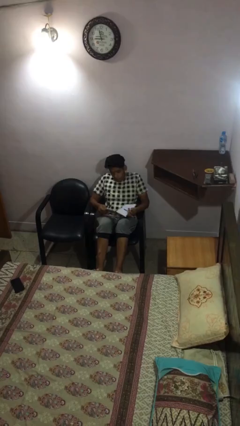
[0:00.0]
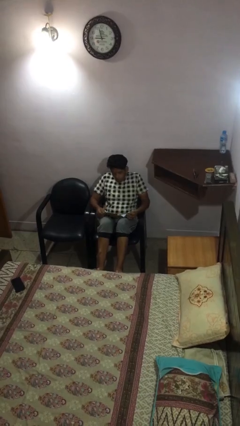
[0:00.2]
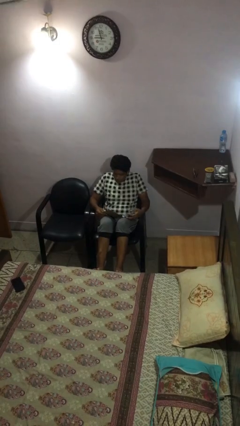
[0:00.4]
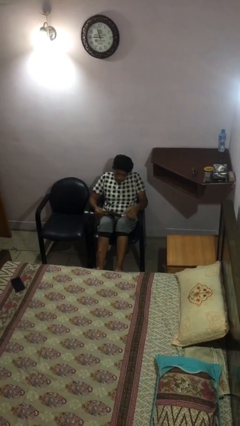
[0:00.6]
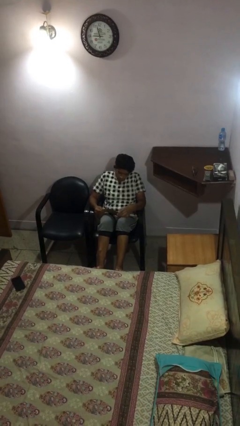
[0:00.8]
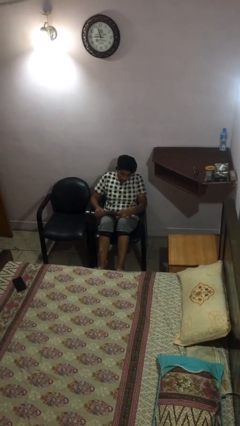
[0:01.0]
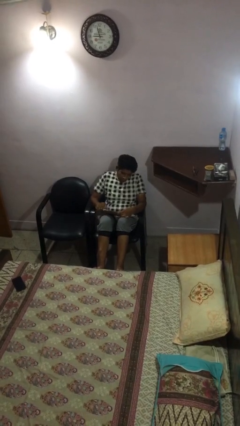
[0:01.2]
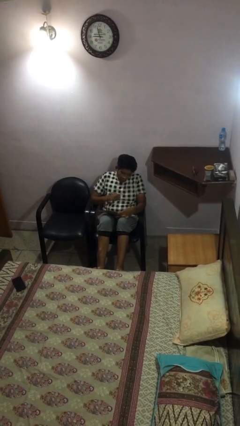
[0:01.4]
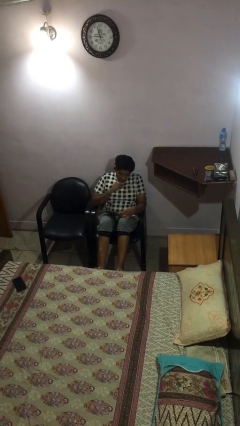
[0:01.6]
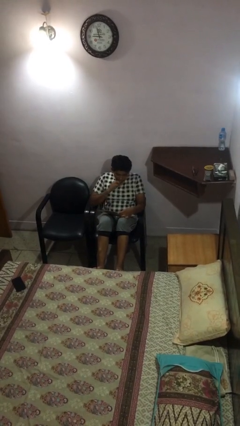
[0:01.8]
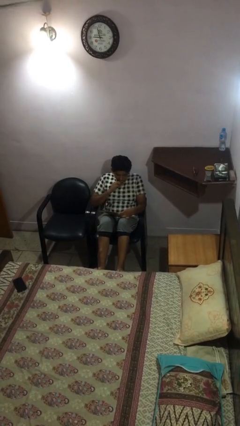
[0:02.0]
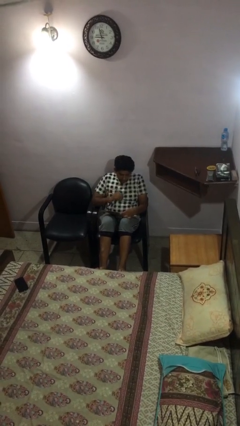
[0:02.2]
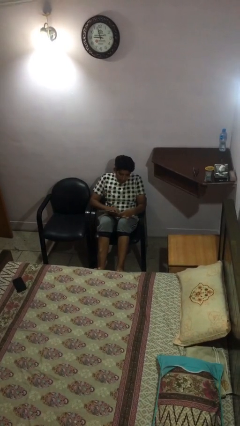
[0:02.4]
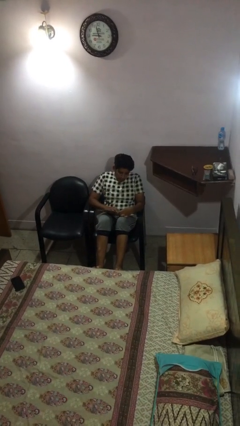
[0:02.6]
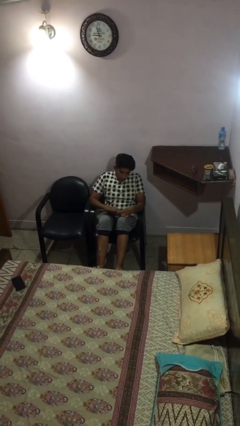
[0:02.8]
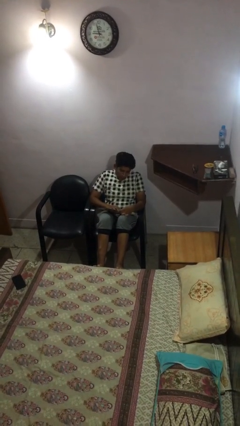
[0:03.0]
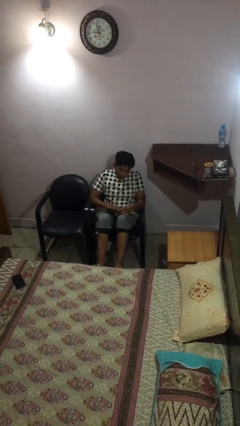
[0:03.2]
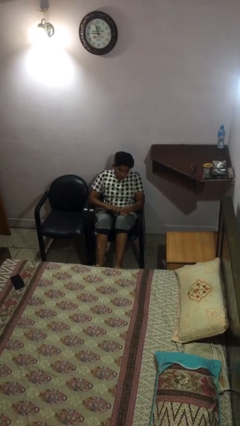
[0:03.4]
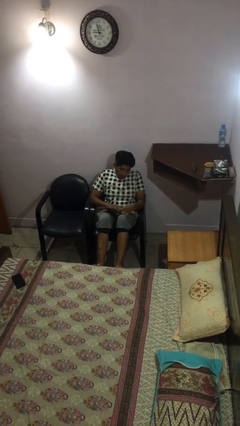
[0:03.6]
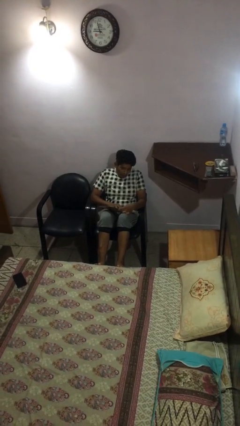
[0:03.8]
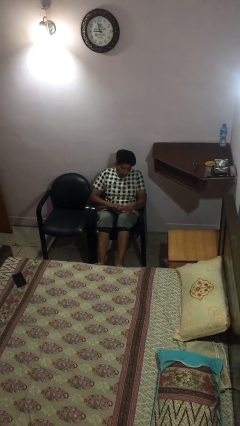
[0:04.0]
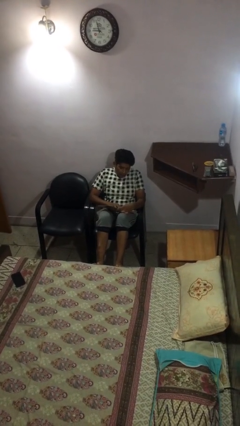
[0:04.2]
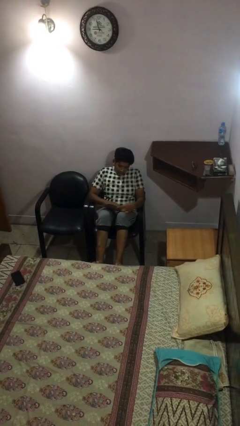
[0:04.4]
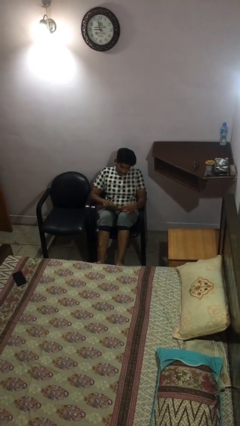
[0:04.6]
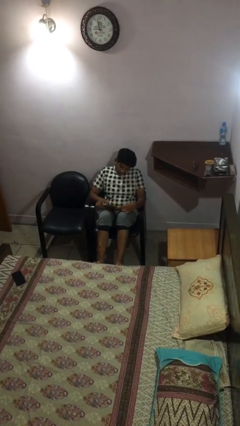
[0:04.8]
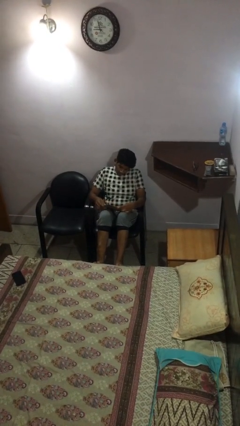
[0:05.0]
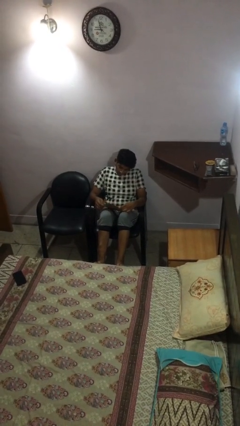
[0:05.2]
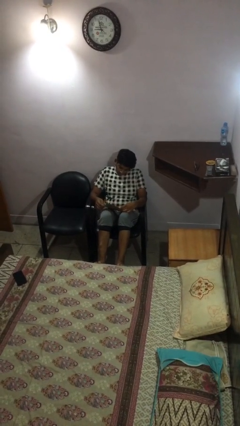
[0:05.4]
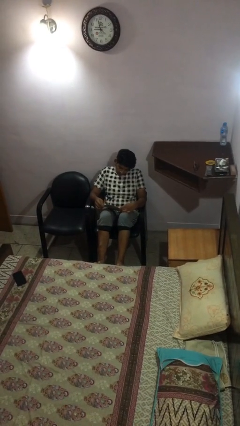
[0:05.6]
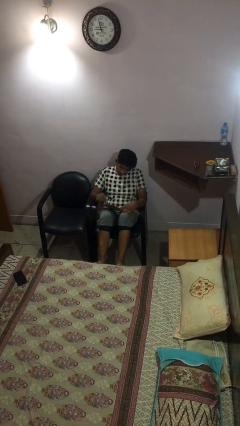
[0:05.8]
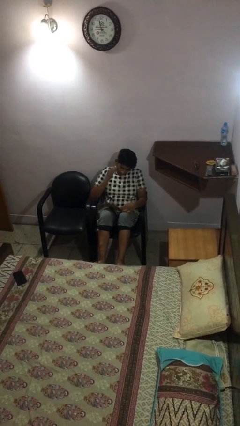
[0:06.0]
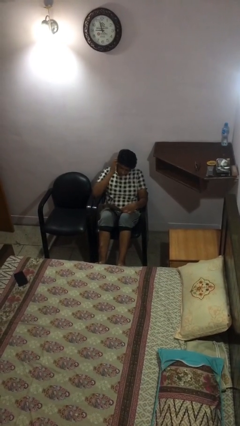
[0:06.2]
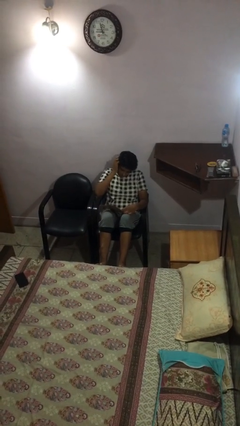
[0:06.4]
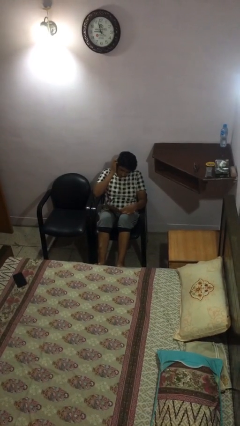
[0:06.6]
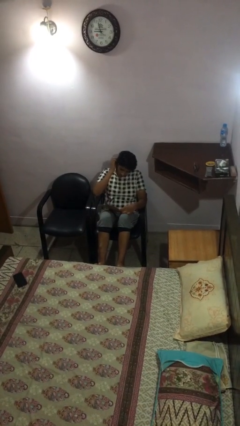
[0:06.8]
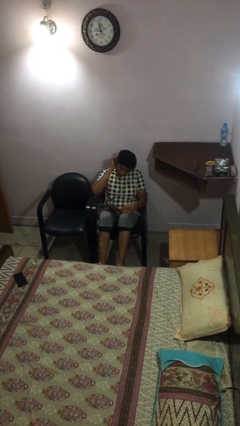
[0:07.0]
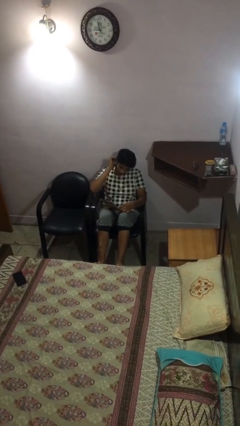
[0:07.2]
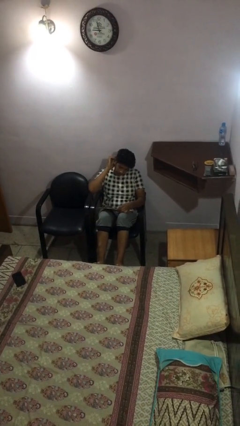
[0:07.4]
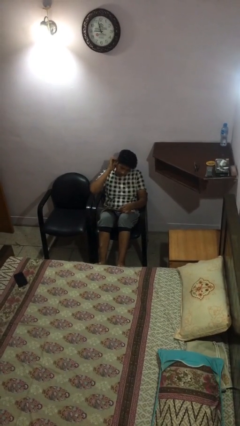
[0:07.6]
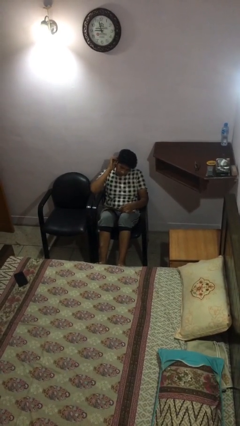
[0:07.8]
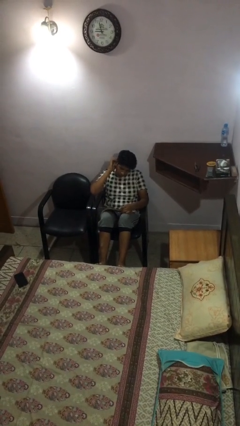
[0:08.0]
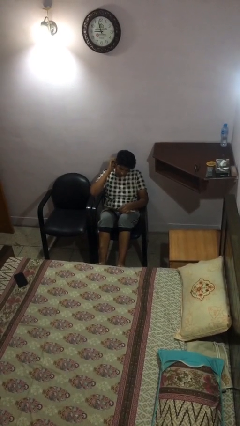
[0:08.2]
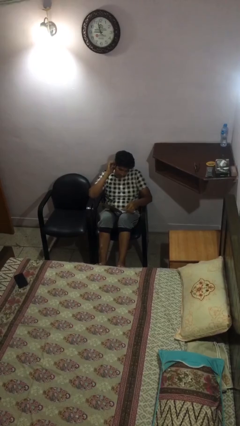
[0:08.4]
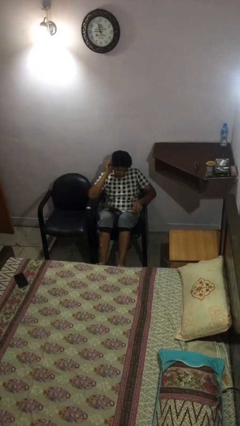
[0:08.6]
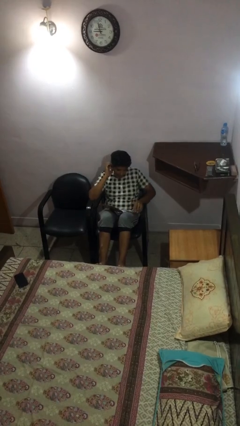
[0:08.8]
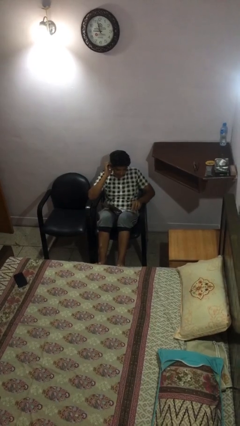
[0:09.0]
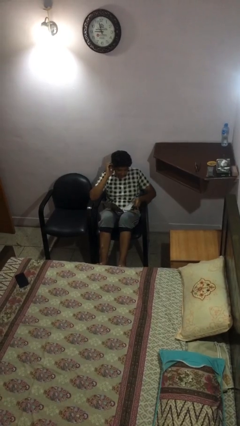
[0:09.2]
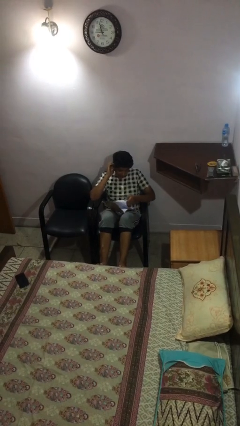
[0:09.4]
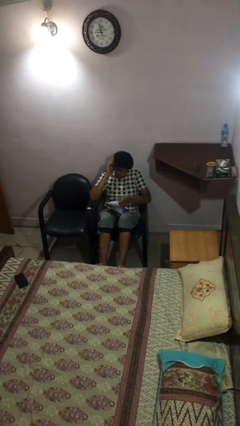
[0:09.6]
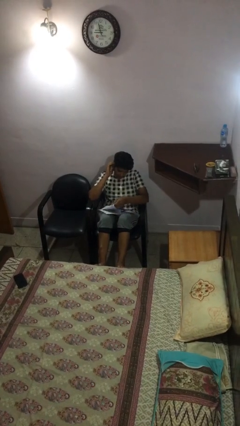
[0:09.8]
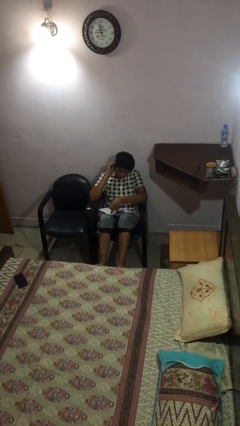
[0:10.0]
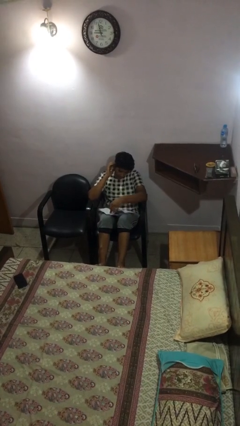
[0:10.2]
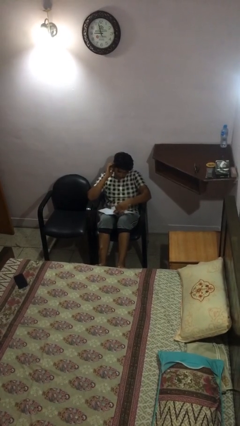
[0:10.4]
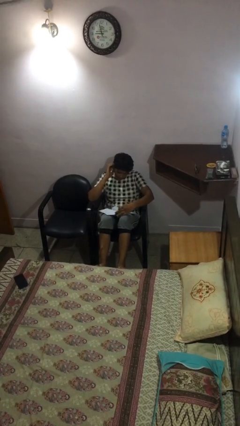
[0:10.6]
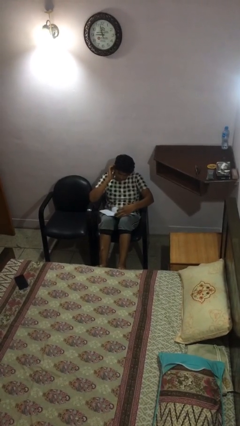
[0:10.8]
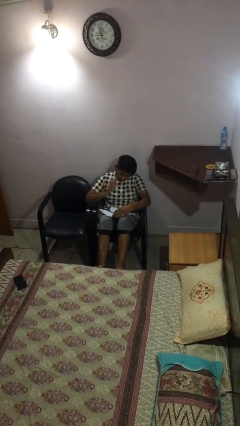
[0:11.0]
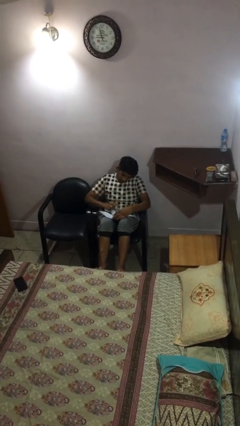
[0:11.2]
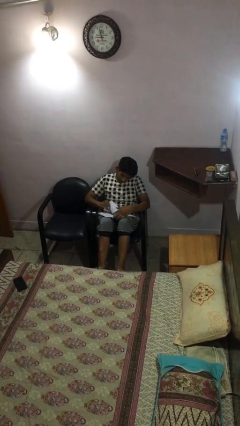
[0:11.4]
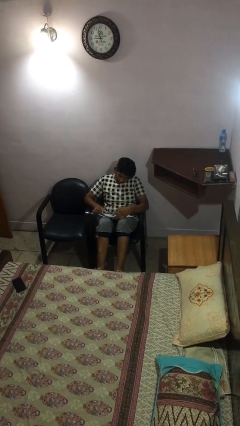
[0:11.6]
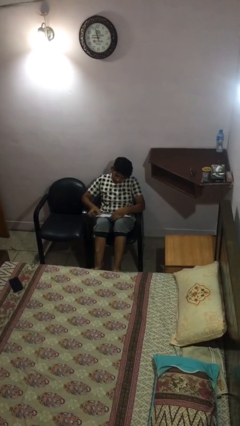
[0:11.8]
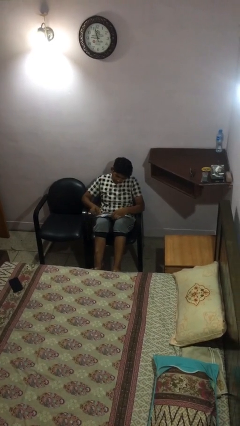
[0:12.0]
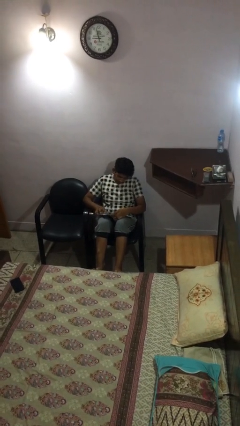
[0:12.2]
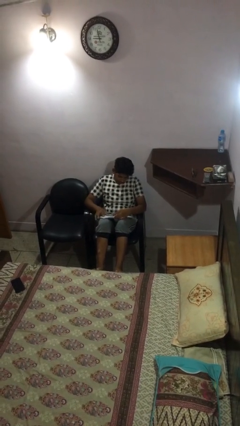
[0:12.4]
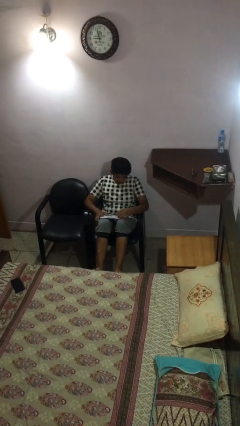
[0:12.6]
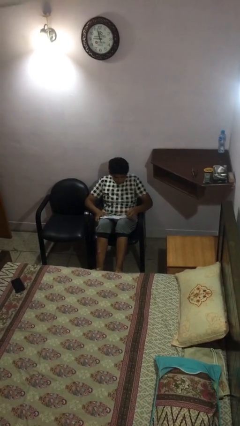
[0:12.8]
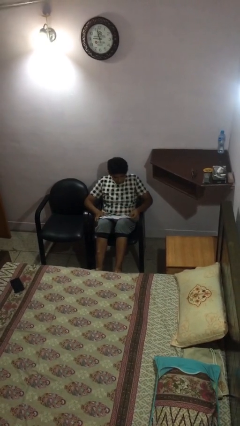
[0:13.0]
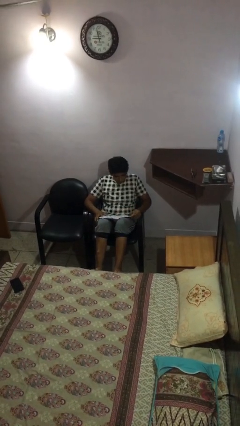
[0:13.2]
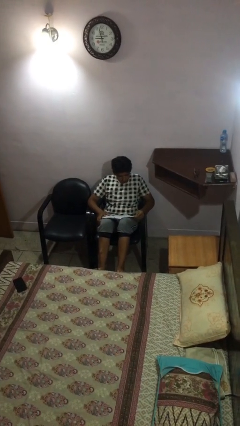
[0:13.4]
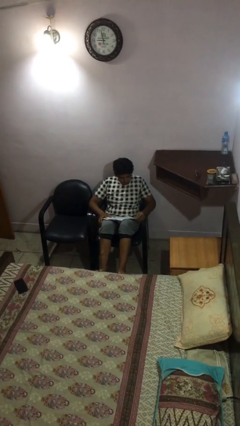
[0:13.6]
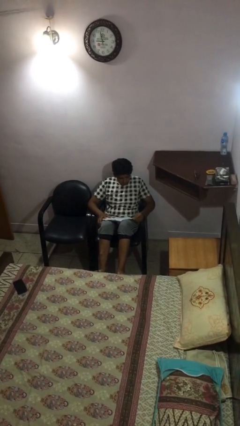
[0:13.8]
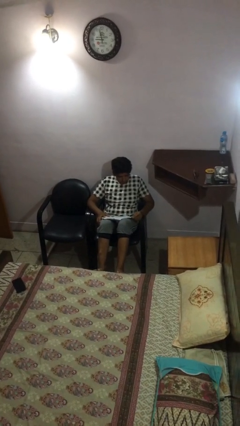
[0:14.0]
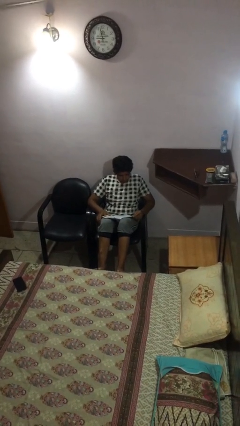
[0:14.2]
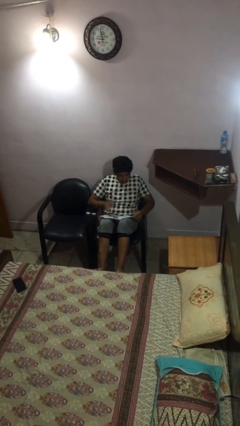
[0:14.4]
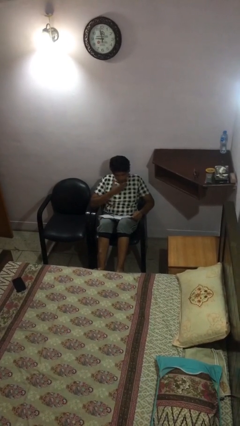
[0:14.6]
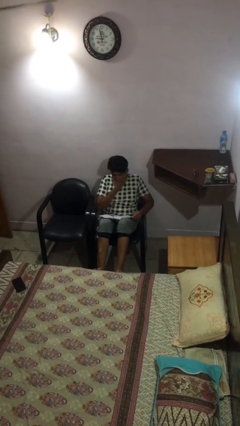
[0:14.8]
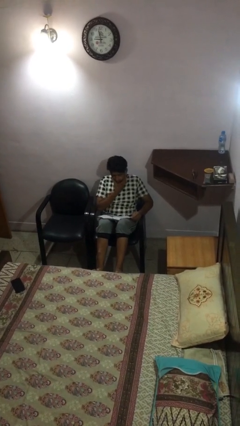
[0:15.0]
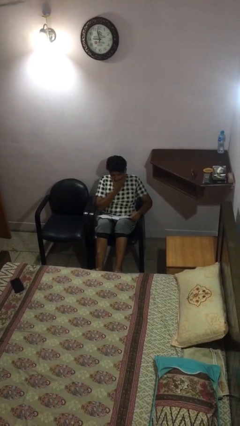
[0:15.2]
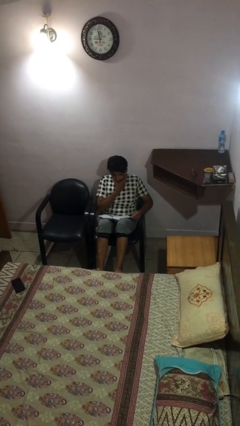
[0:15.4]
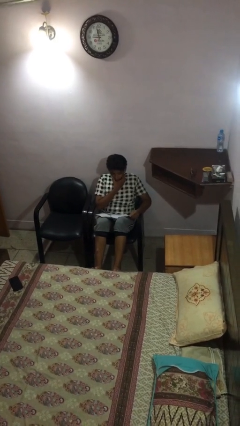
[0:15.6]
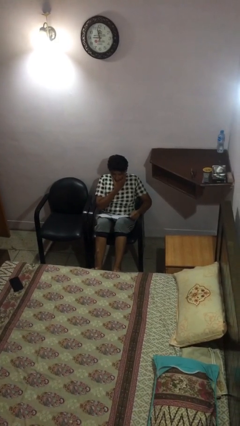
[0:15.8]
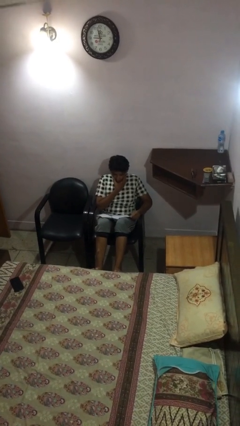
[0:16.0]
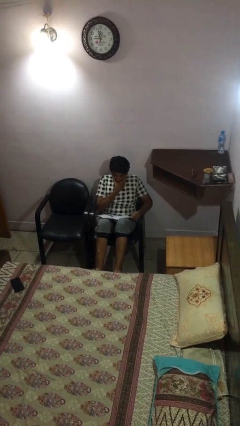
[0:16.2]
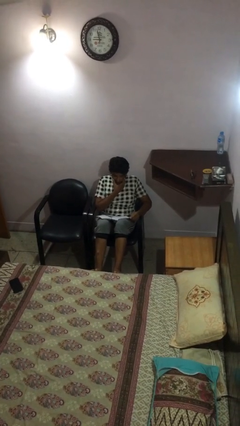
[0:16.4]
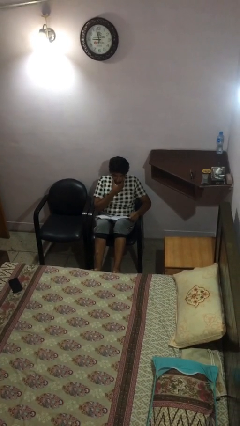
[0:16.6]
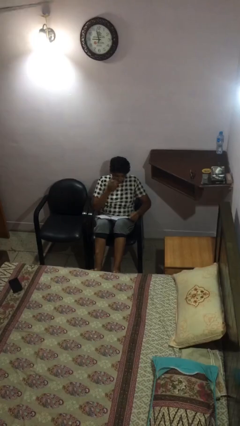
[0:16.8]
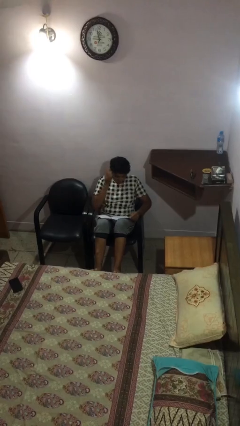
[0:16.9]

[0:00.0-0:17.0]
person reads document

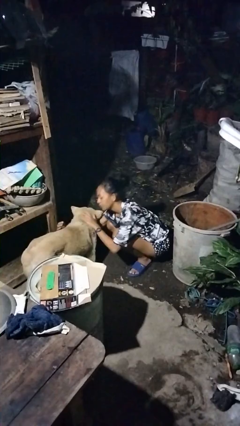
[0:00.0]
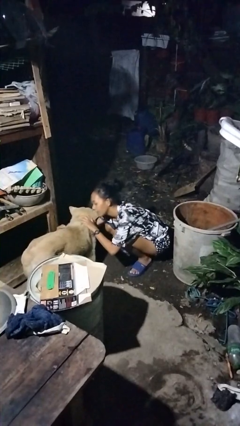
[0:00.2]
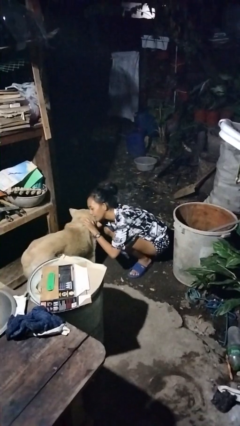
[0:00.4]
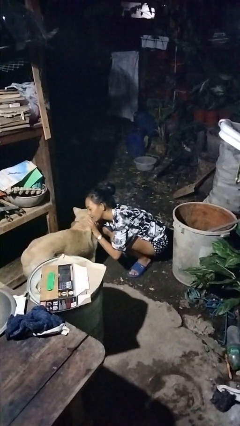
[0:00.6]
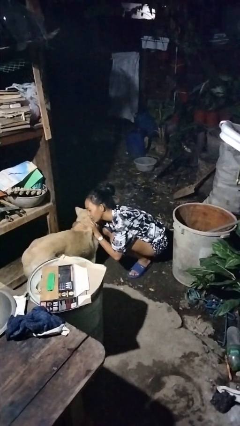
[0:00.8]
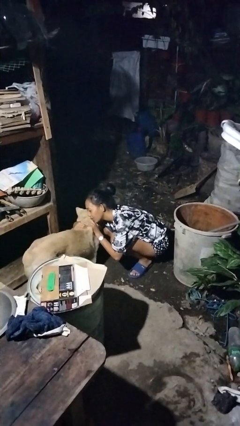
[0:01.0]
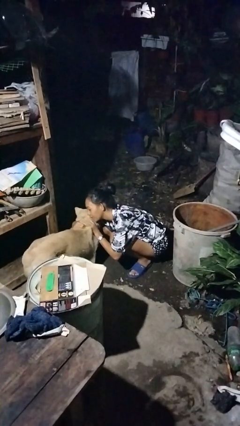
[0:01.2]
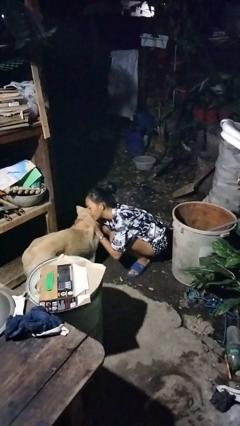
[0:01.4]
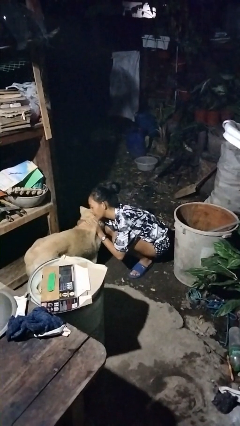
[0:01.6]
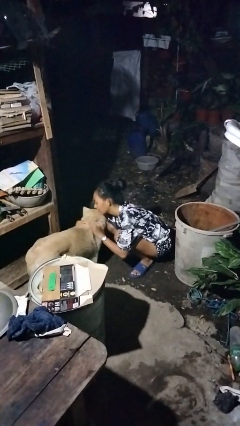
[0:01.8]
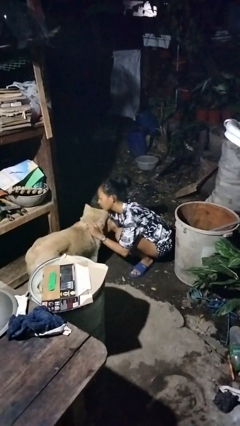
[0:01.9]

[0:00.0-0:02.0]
person hugs dog
